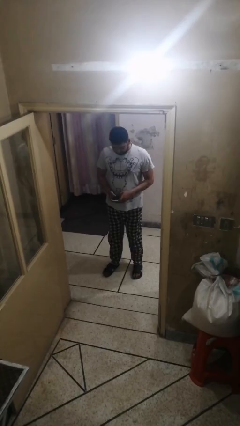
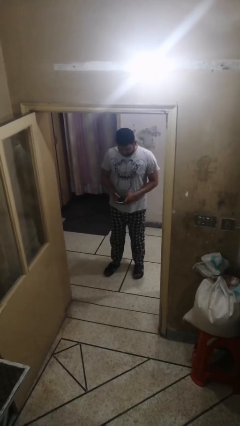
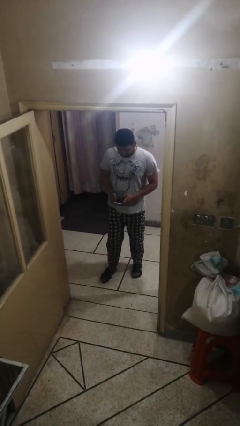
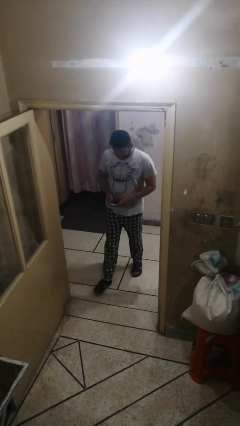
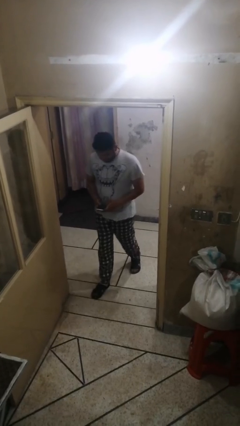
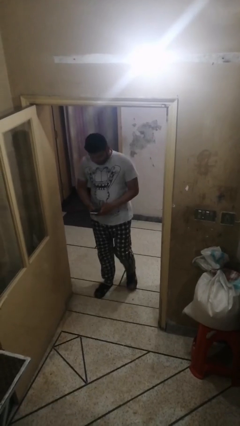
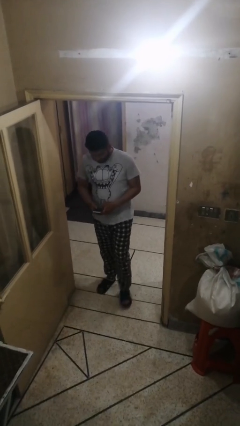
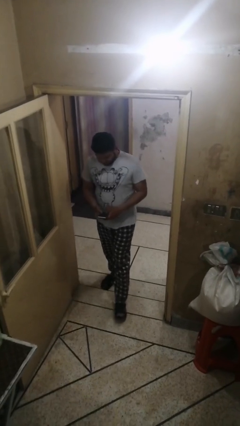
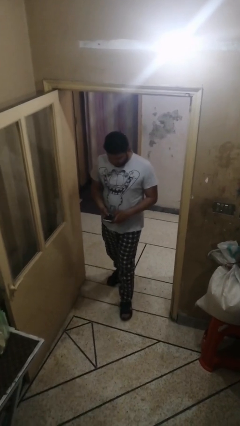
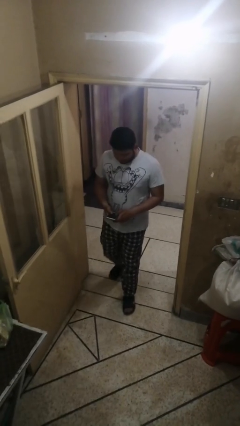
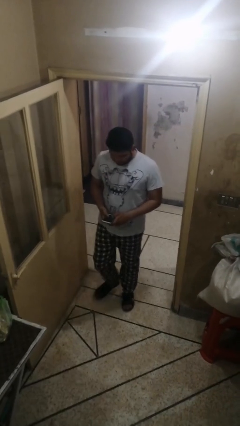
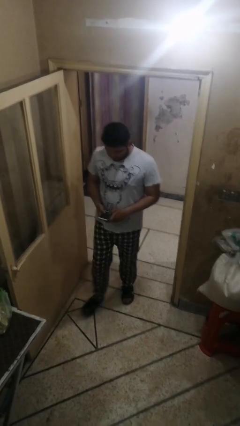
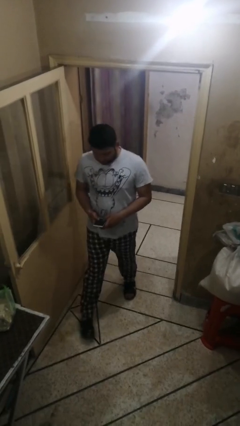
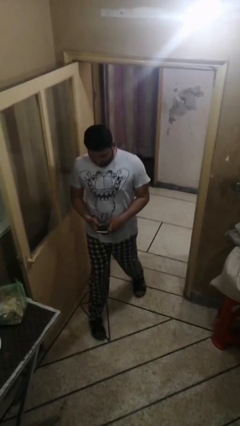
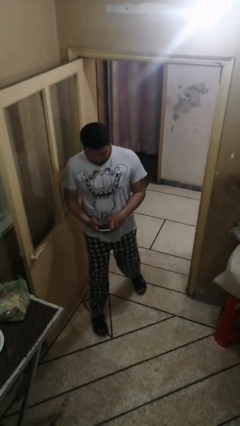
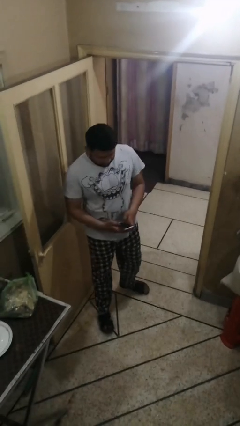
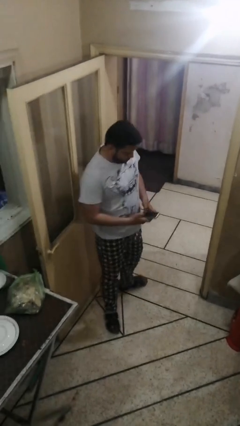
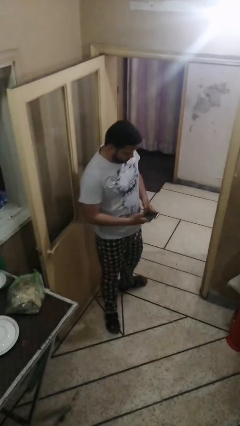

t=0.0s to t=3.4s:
person enters scene through structure

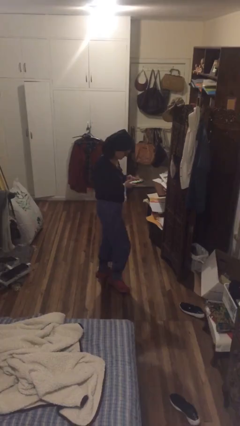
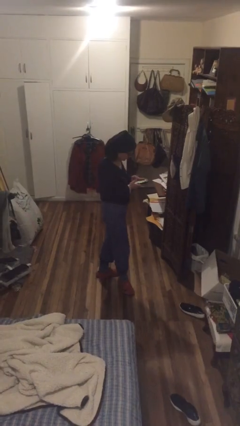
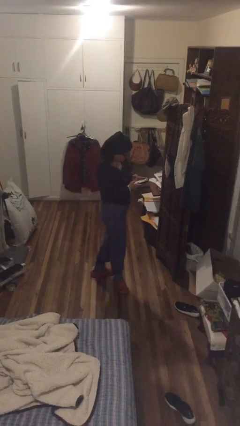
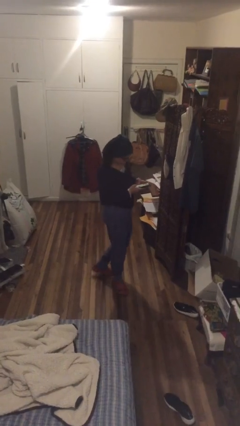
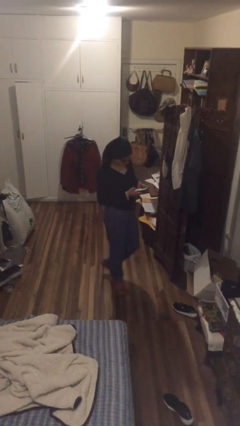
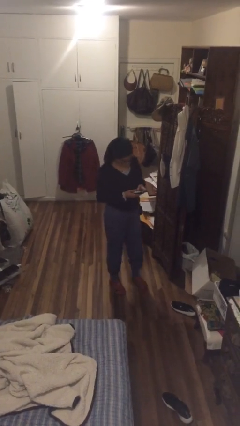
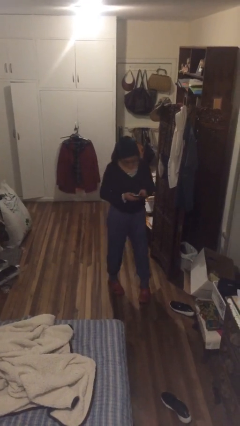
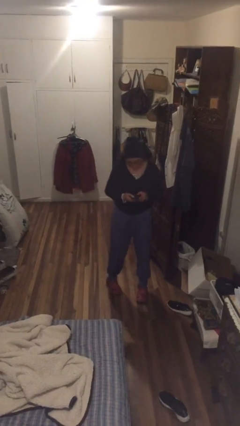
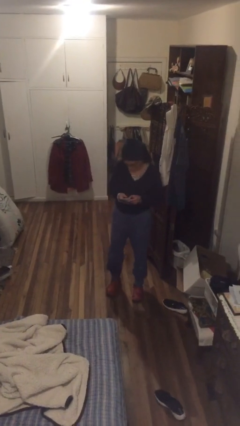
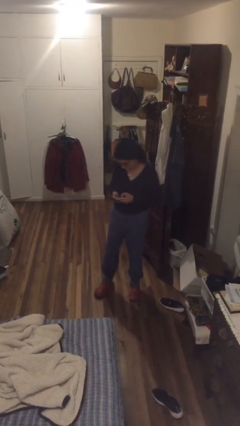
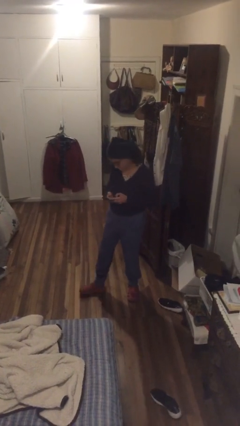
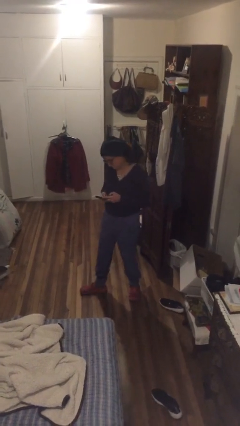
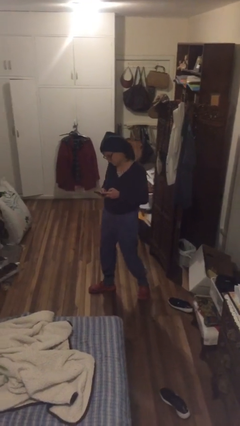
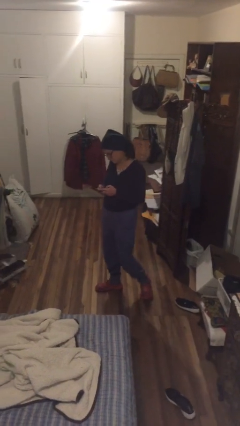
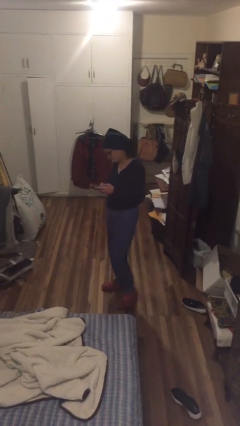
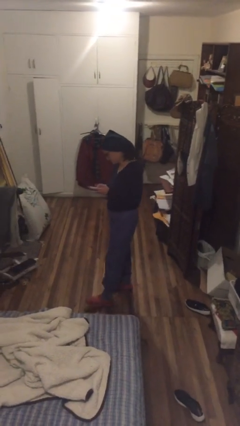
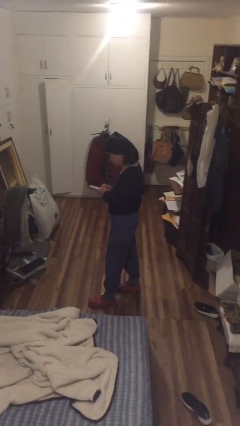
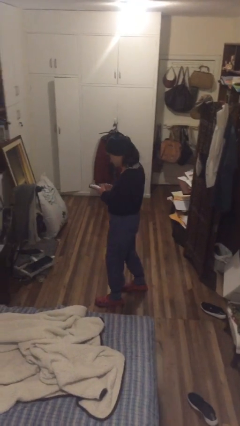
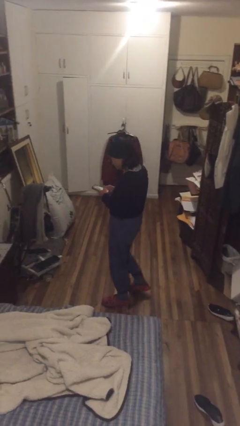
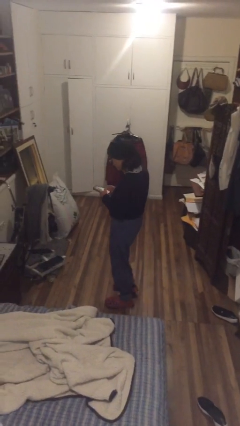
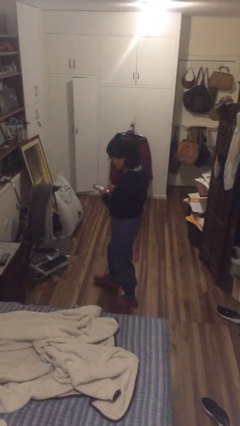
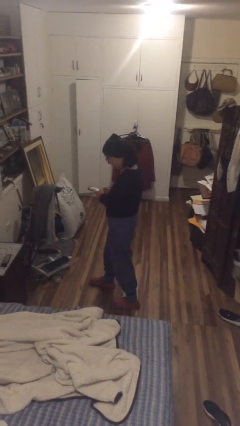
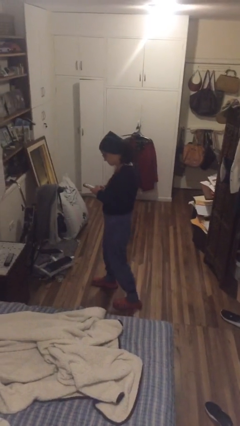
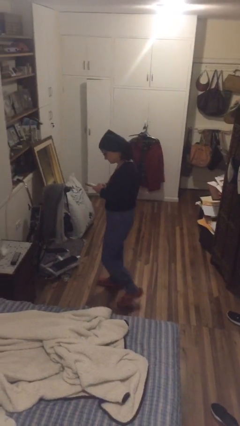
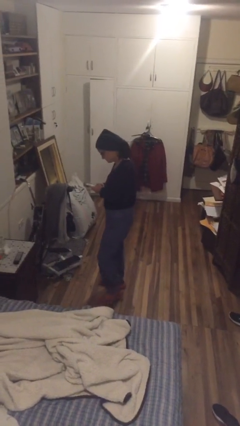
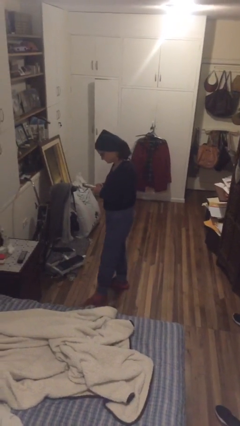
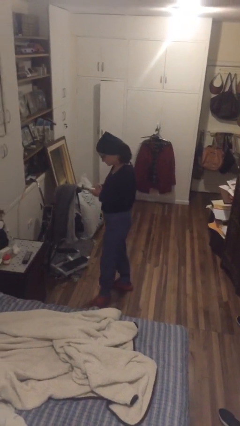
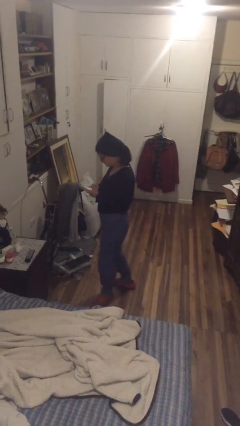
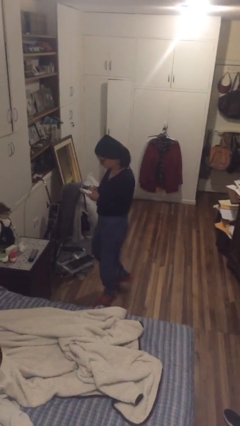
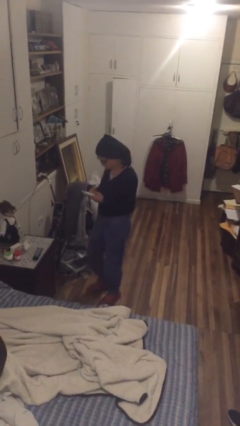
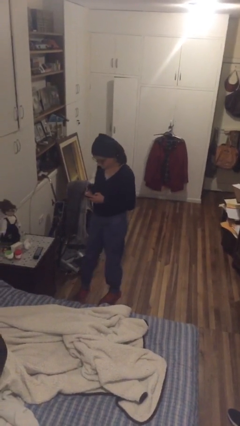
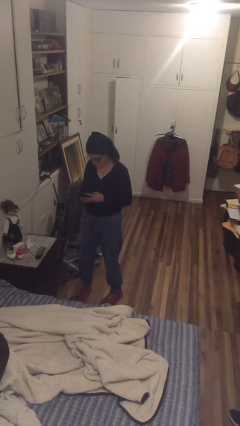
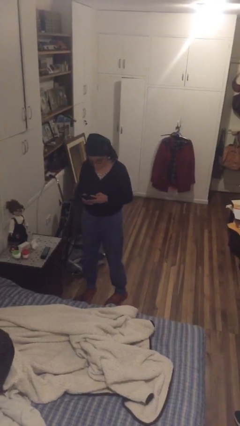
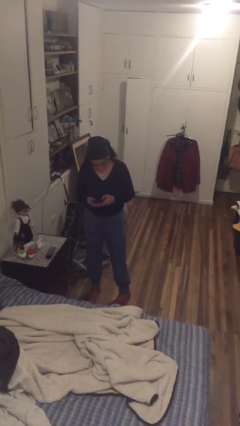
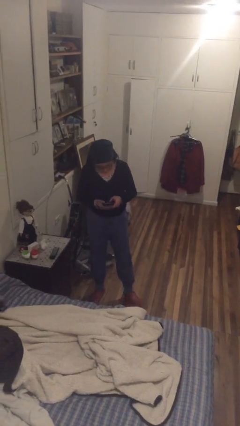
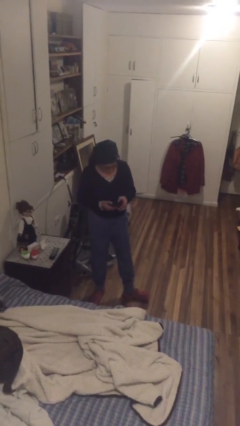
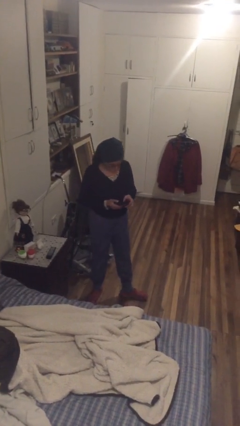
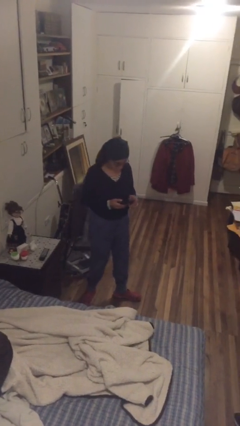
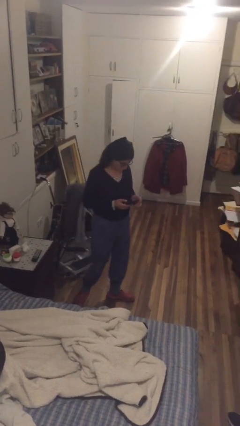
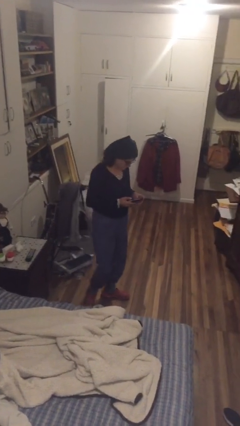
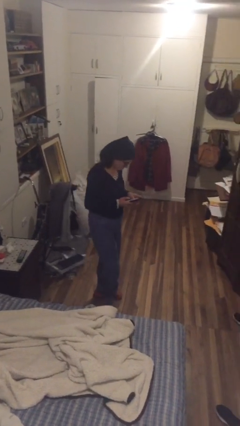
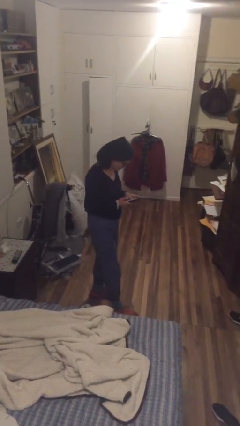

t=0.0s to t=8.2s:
person texts on phone

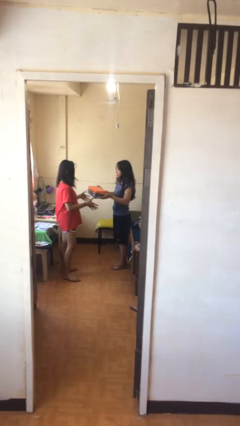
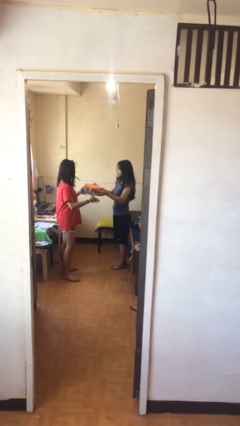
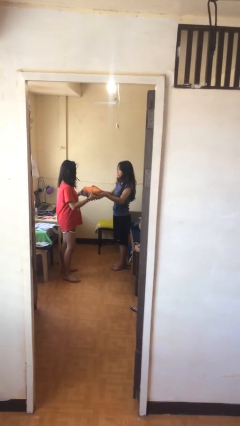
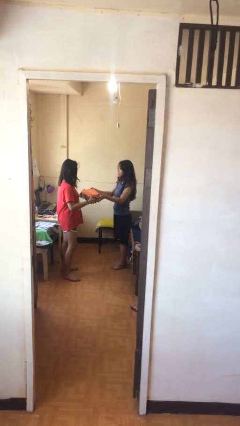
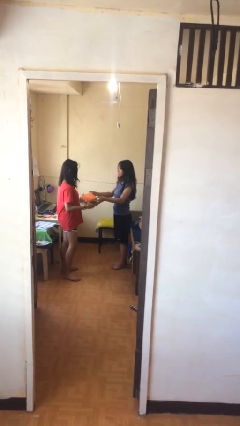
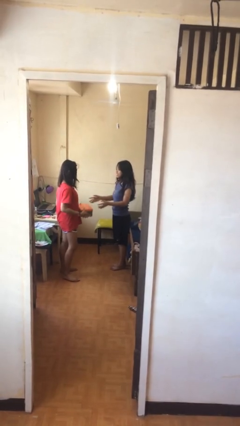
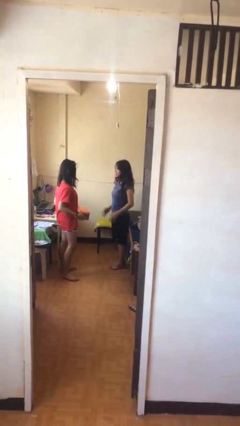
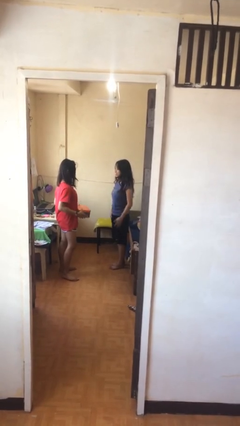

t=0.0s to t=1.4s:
person transfers object to person

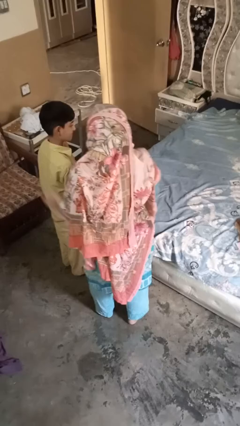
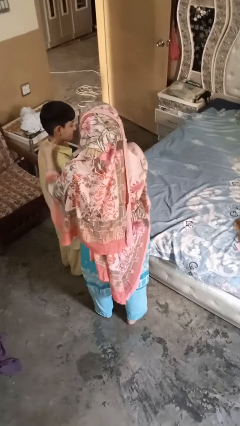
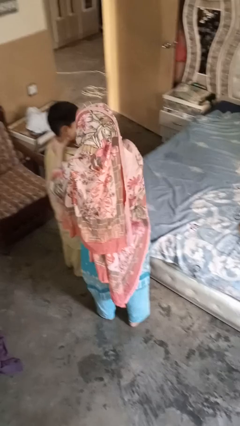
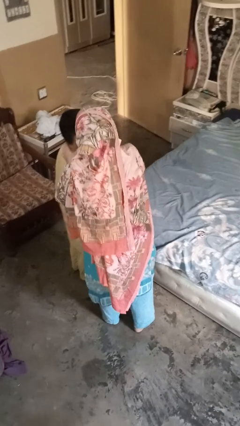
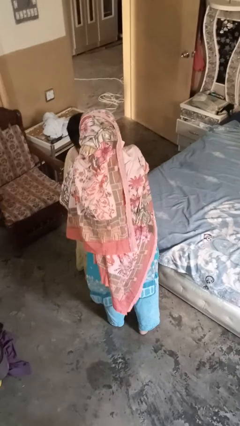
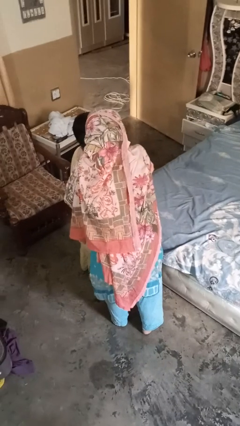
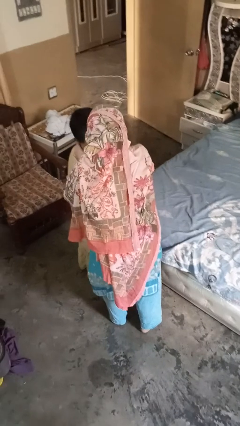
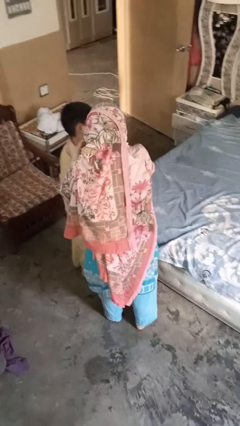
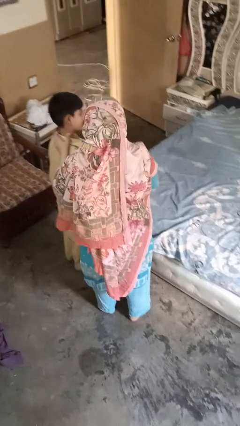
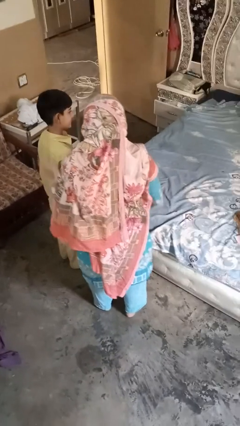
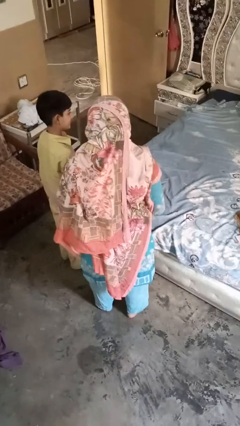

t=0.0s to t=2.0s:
person gestures blow kiss

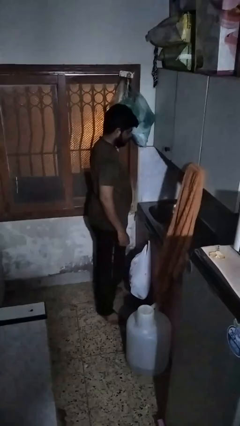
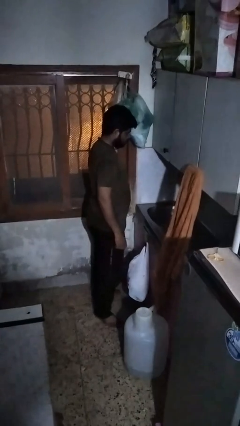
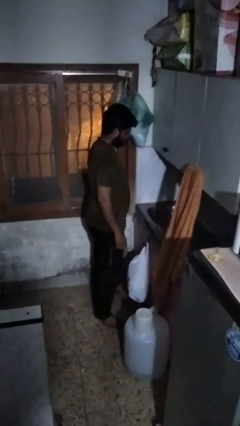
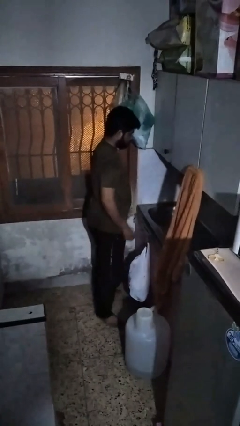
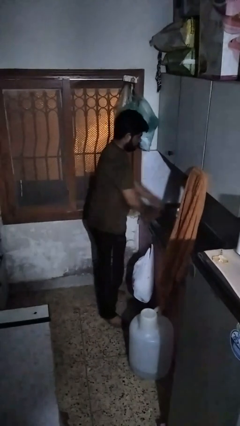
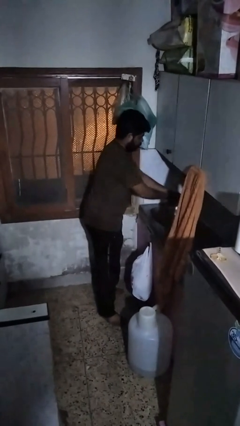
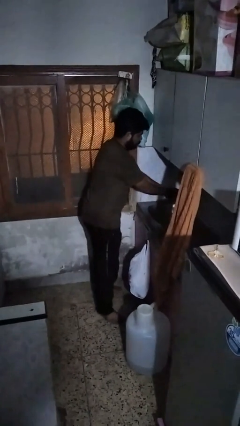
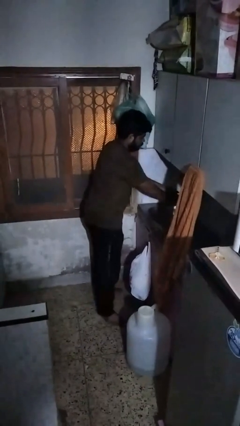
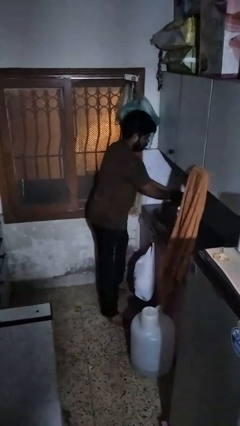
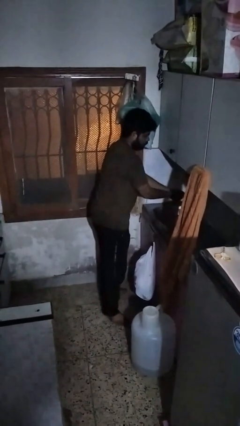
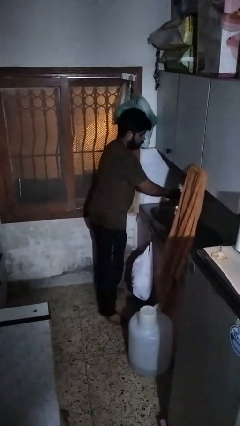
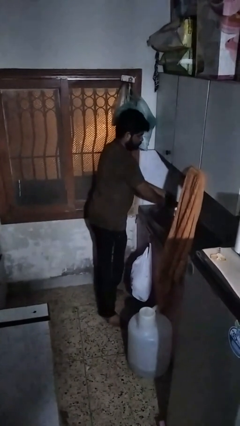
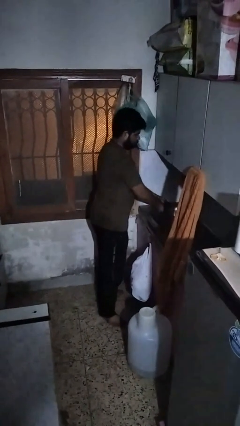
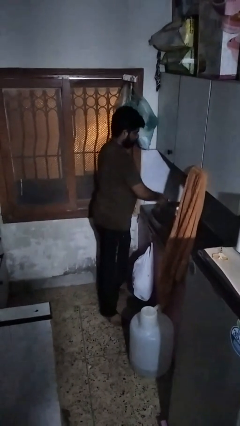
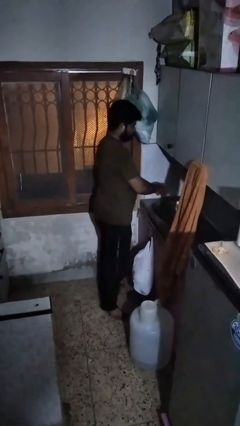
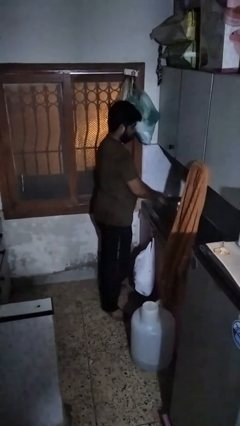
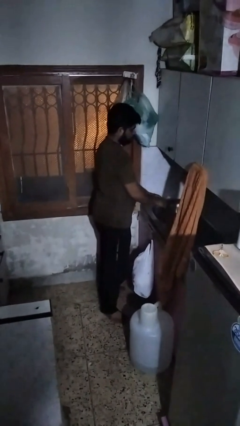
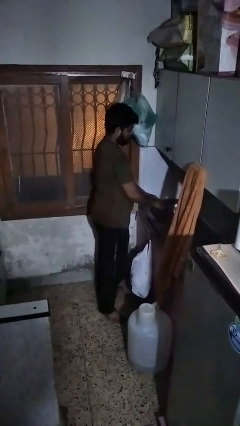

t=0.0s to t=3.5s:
person washes hands
